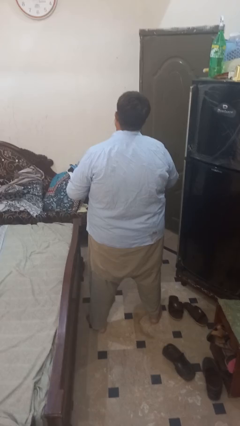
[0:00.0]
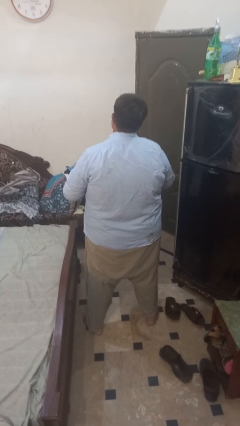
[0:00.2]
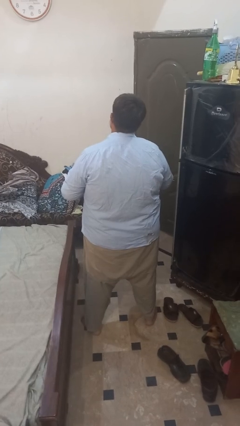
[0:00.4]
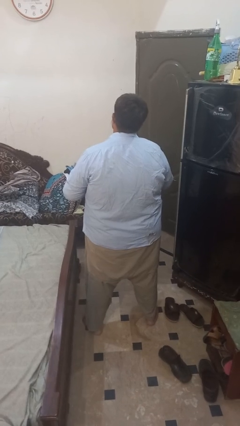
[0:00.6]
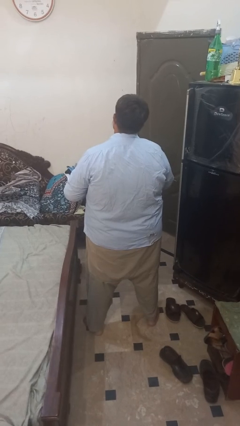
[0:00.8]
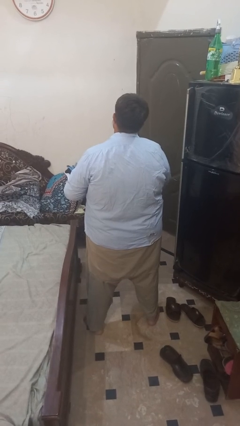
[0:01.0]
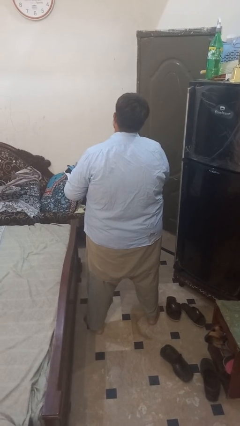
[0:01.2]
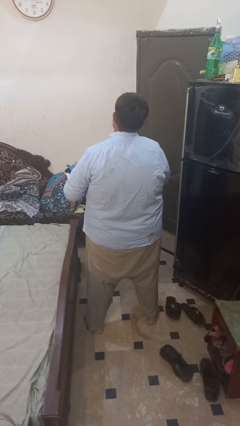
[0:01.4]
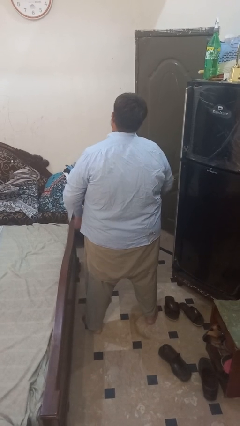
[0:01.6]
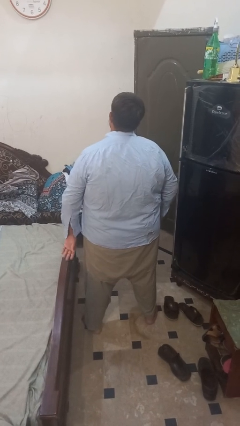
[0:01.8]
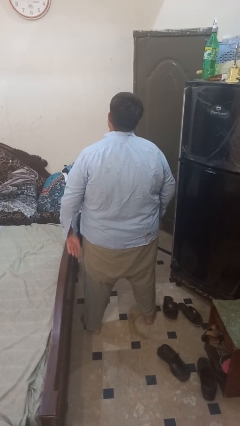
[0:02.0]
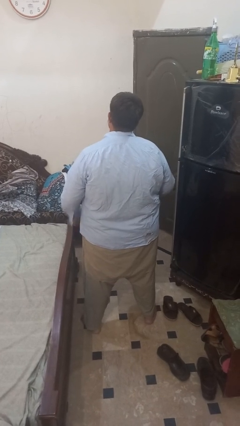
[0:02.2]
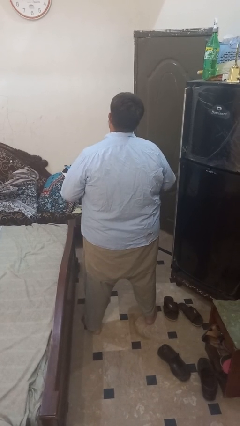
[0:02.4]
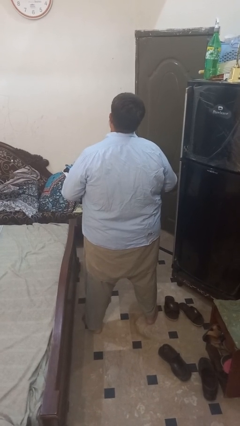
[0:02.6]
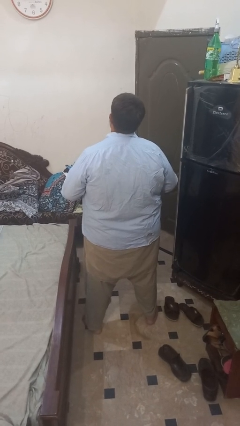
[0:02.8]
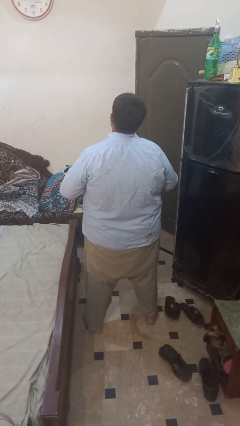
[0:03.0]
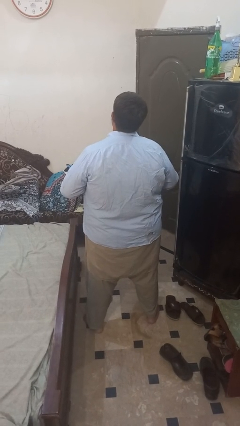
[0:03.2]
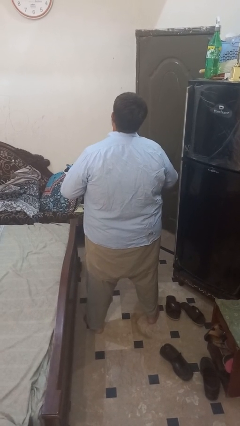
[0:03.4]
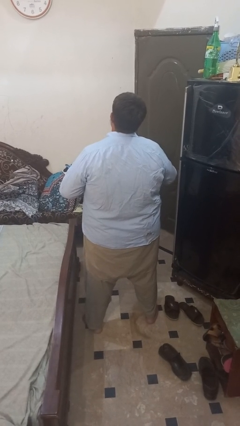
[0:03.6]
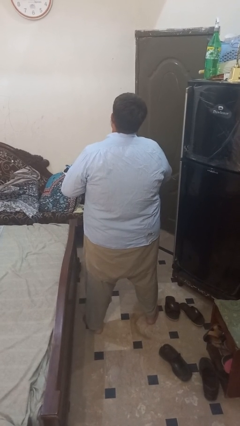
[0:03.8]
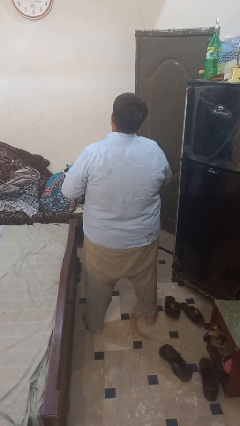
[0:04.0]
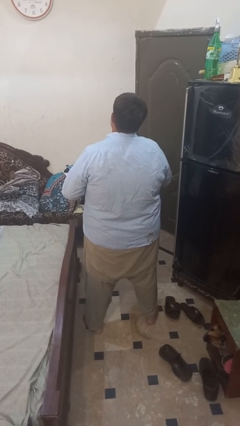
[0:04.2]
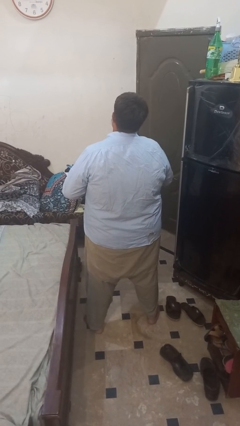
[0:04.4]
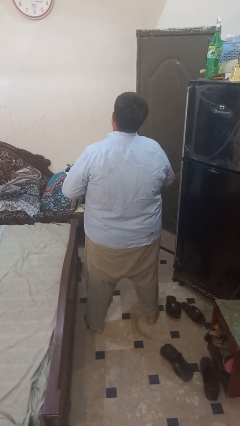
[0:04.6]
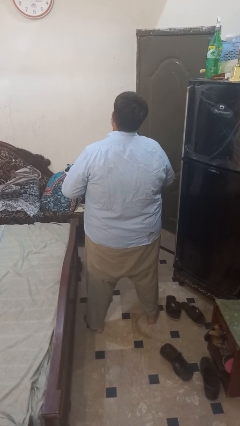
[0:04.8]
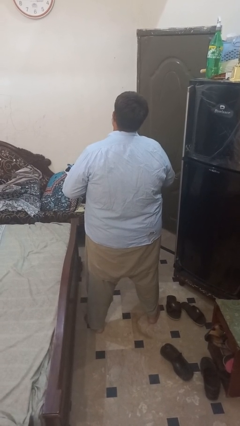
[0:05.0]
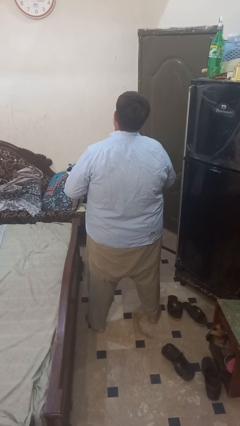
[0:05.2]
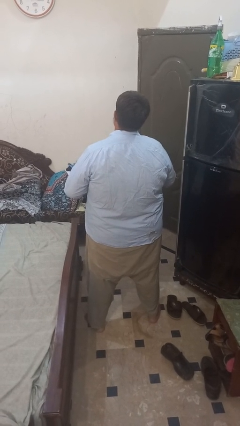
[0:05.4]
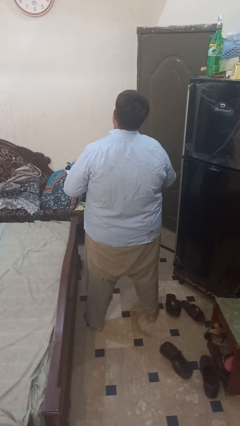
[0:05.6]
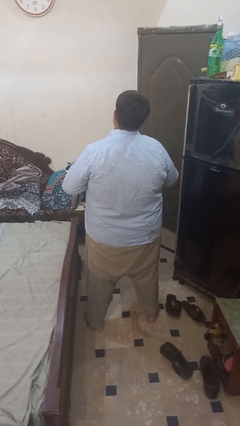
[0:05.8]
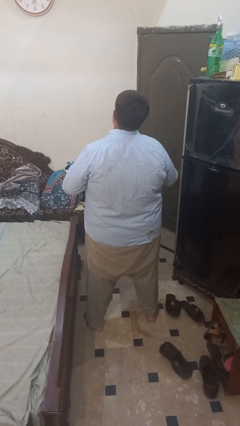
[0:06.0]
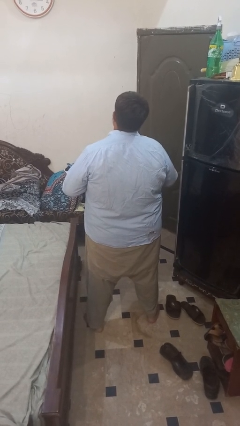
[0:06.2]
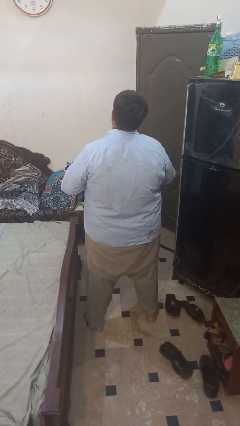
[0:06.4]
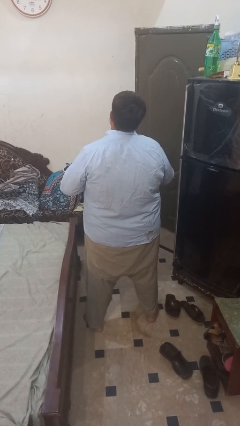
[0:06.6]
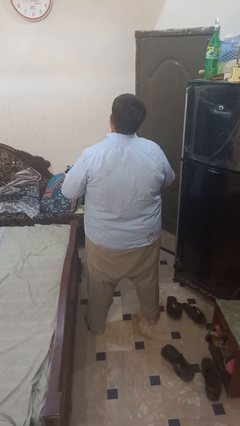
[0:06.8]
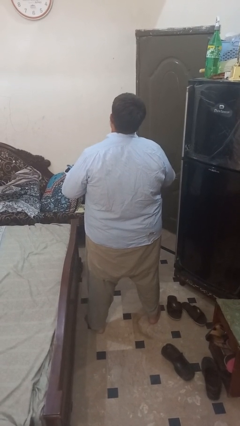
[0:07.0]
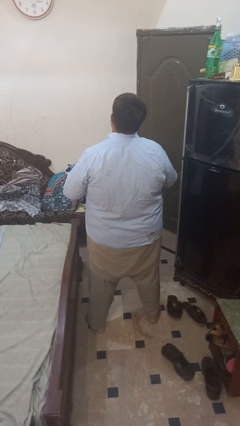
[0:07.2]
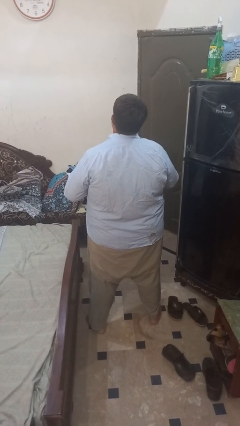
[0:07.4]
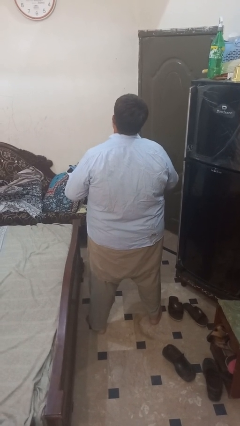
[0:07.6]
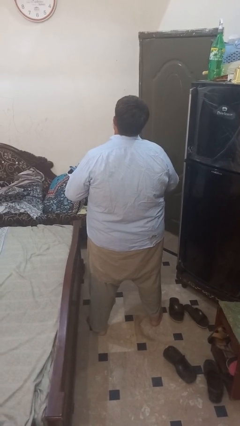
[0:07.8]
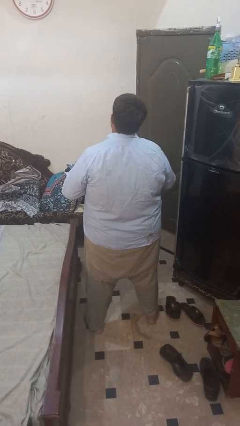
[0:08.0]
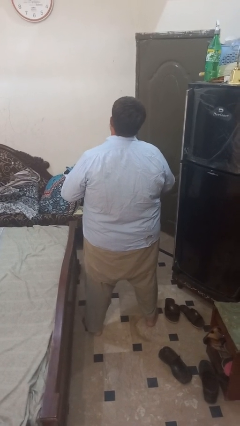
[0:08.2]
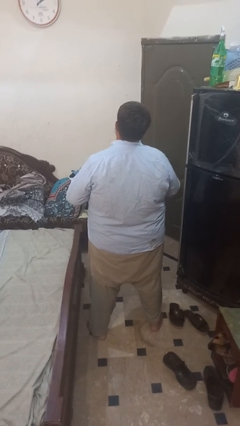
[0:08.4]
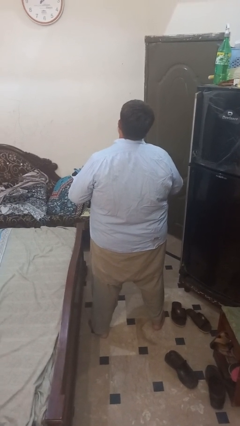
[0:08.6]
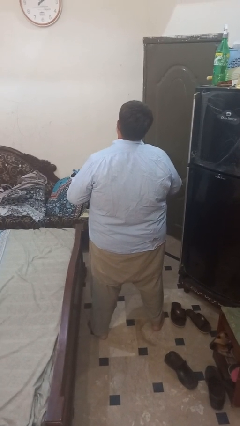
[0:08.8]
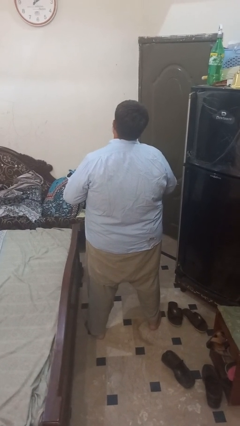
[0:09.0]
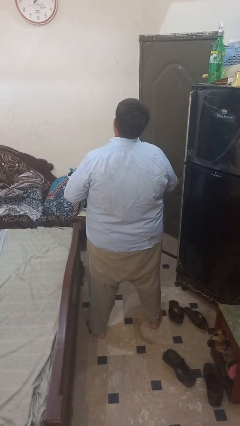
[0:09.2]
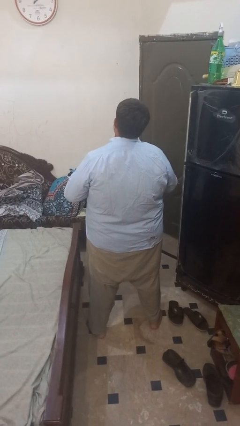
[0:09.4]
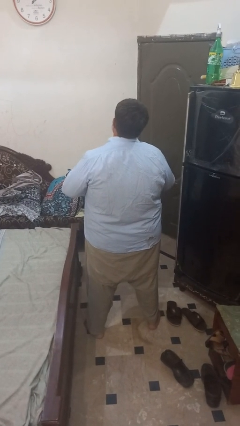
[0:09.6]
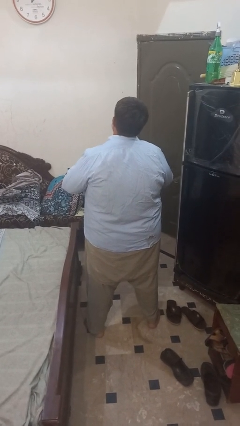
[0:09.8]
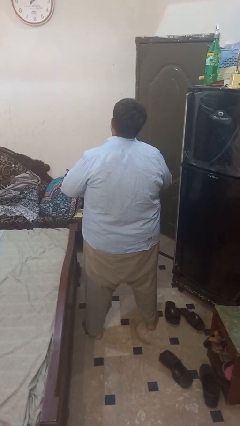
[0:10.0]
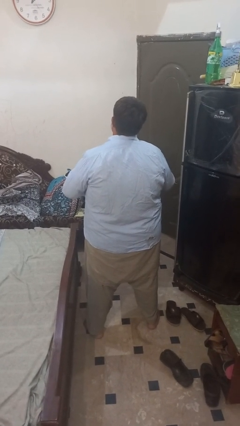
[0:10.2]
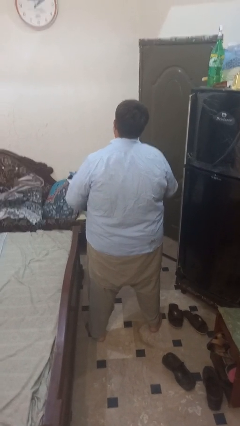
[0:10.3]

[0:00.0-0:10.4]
person buttons shirt

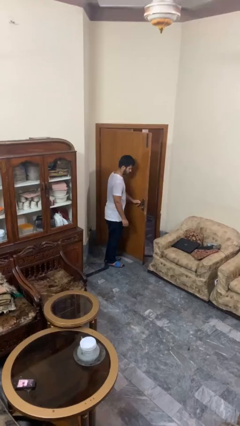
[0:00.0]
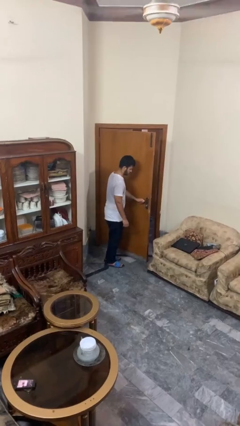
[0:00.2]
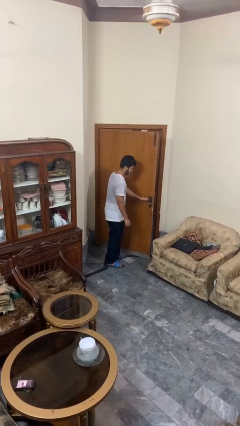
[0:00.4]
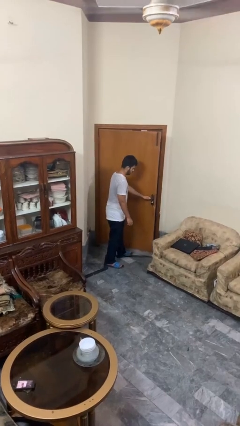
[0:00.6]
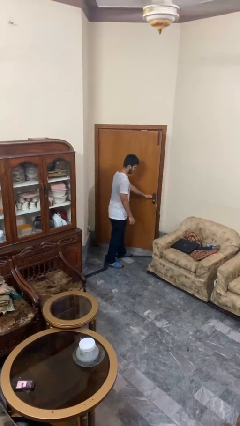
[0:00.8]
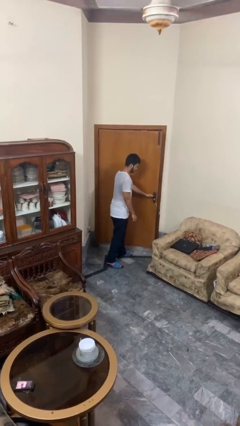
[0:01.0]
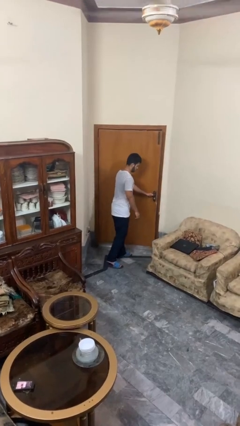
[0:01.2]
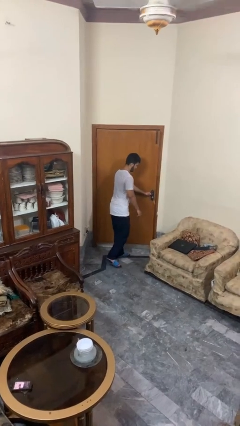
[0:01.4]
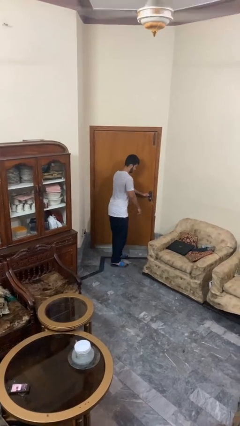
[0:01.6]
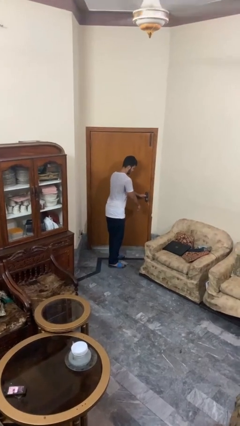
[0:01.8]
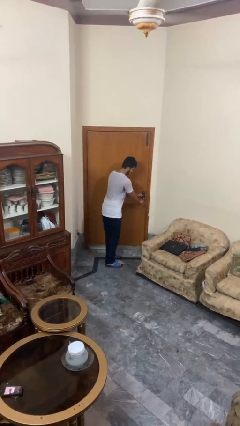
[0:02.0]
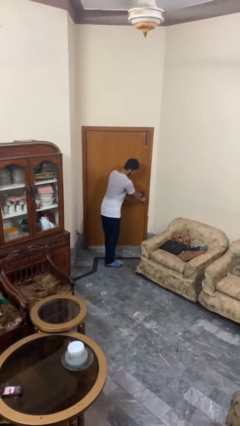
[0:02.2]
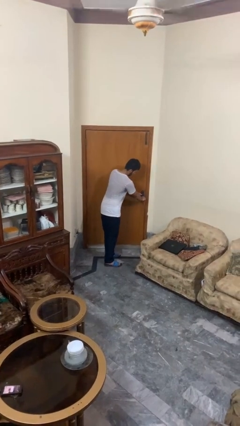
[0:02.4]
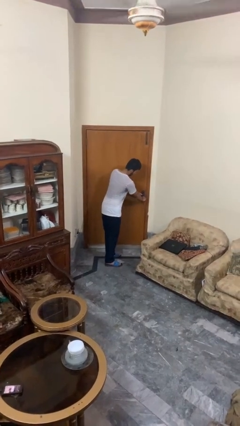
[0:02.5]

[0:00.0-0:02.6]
person closes facility door

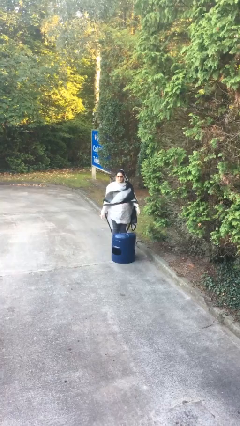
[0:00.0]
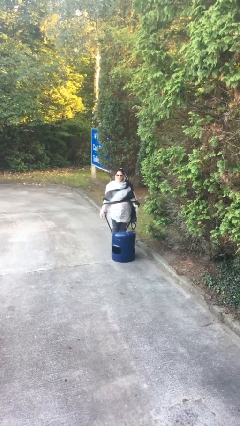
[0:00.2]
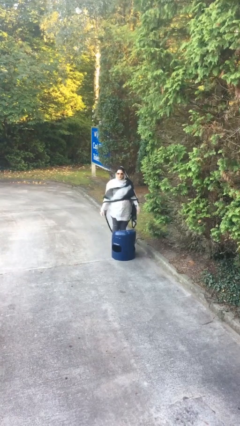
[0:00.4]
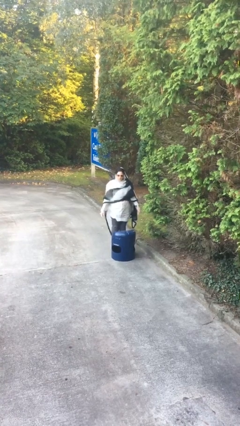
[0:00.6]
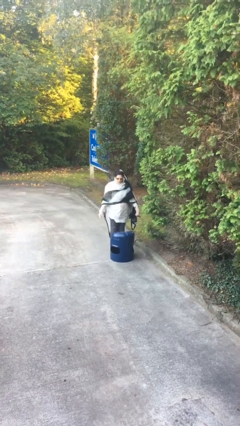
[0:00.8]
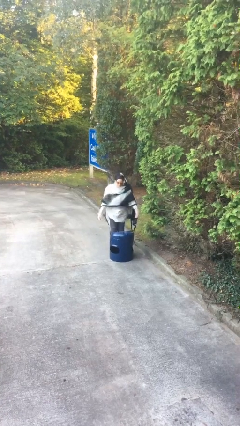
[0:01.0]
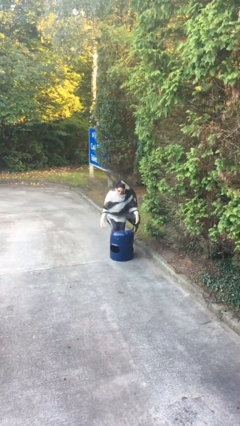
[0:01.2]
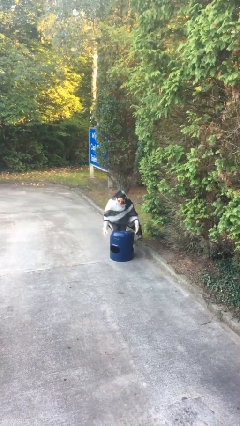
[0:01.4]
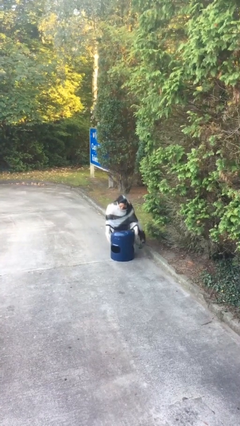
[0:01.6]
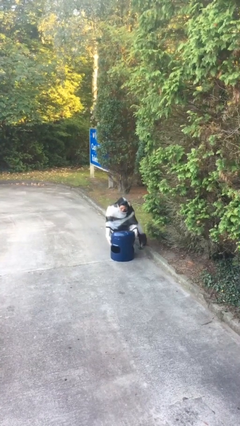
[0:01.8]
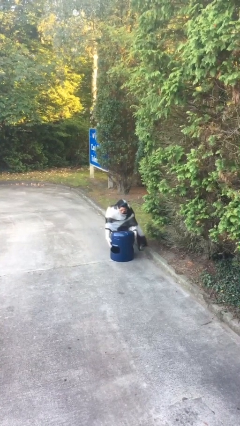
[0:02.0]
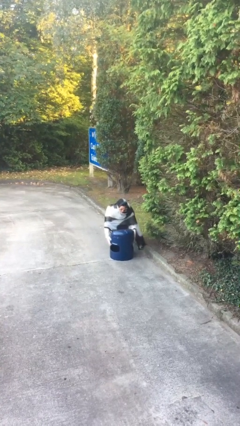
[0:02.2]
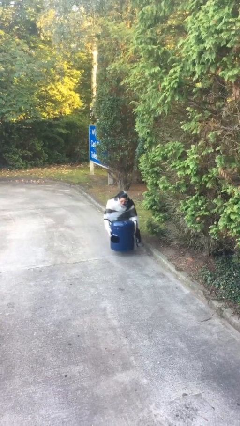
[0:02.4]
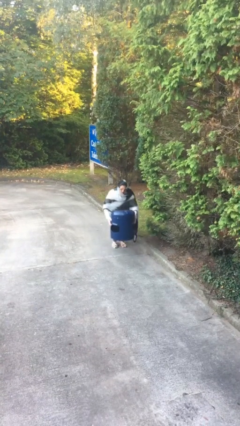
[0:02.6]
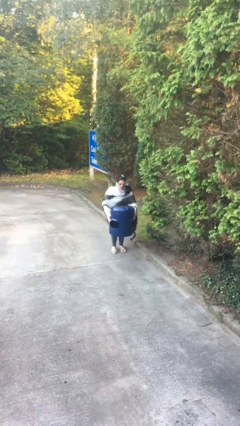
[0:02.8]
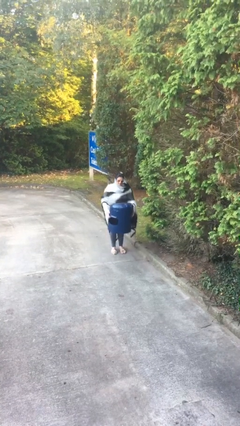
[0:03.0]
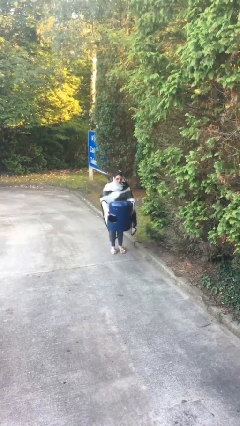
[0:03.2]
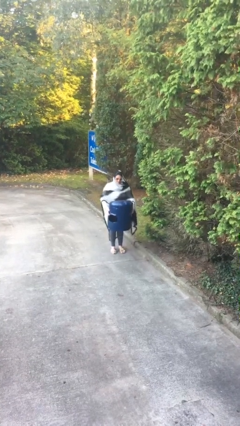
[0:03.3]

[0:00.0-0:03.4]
person picks up object from floor

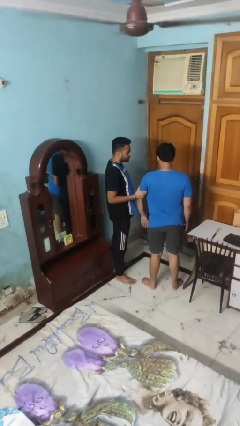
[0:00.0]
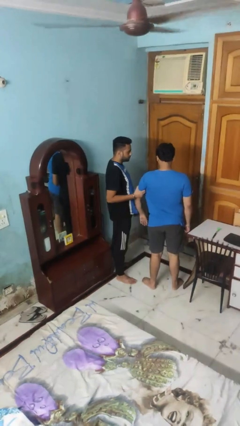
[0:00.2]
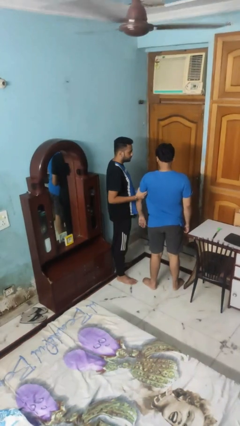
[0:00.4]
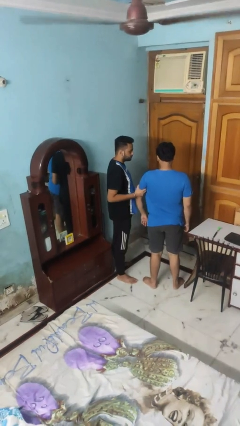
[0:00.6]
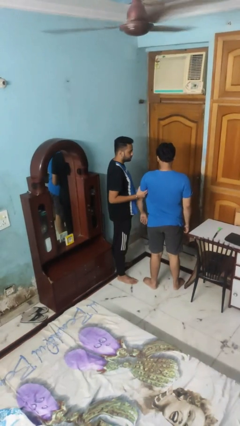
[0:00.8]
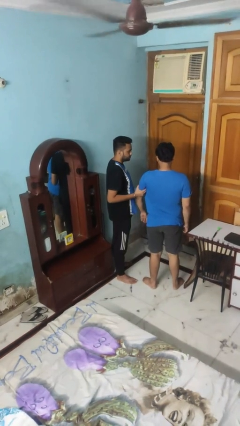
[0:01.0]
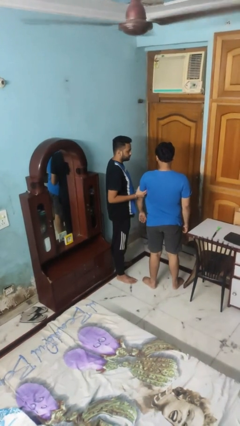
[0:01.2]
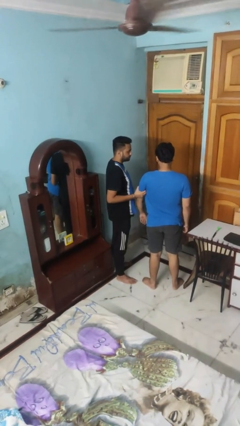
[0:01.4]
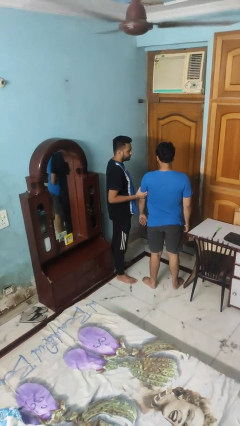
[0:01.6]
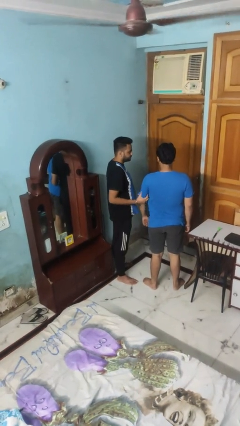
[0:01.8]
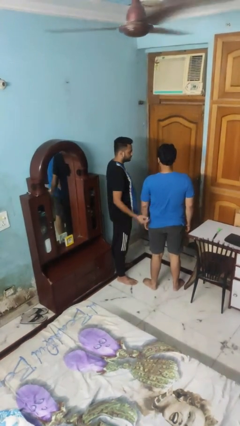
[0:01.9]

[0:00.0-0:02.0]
person grabs person by bicep
